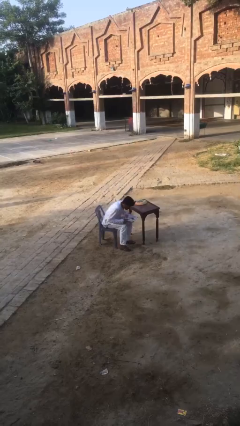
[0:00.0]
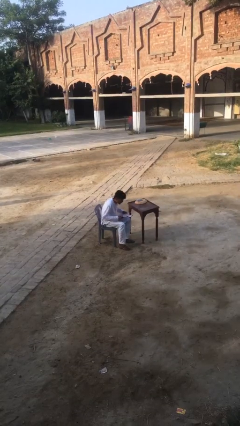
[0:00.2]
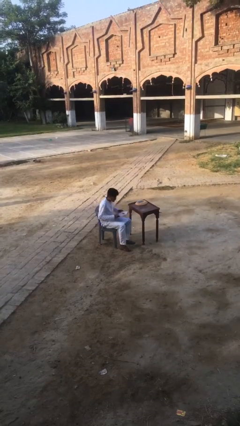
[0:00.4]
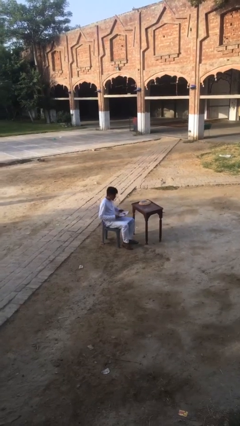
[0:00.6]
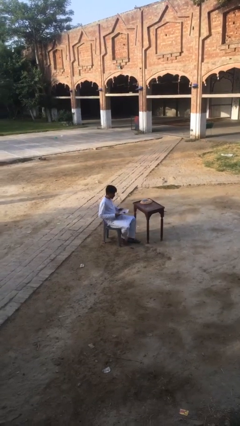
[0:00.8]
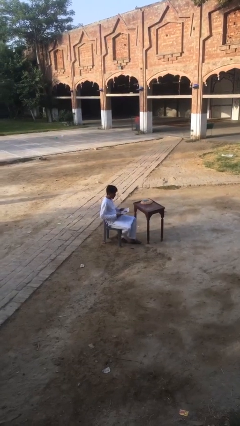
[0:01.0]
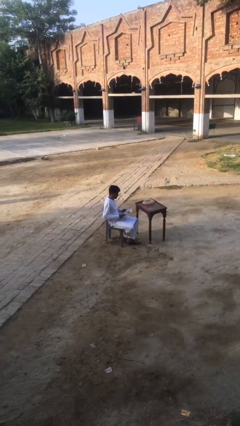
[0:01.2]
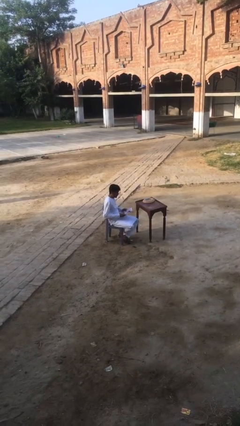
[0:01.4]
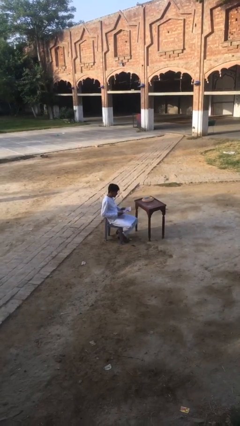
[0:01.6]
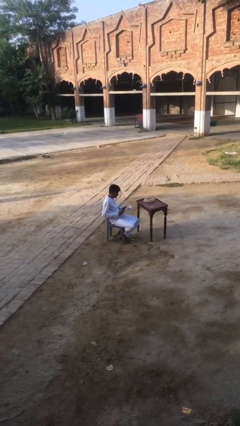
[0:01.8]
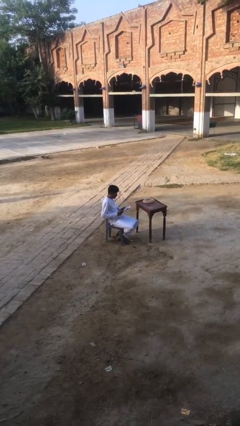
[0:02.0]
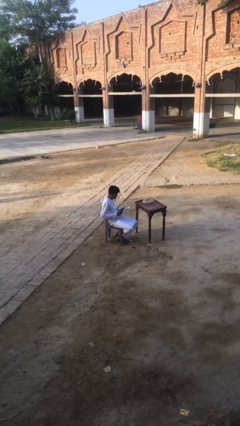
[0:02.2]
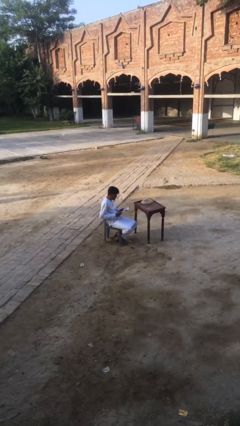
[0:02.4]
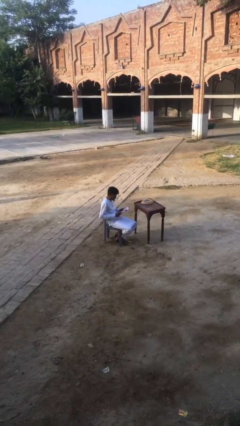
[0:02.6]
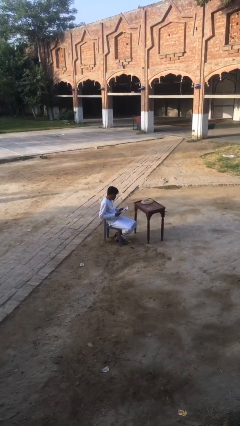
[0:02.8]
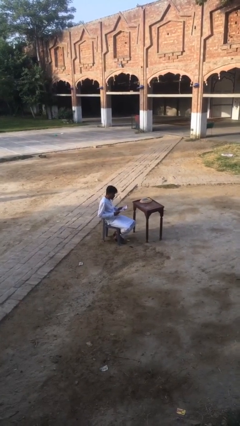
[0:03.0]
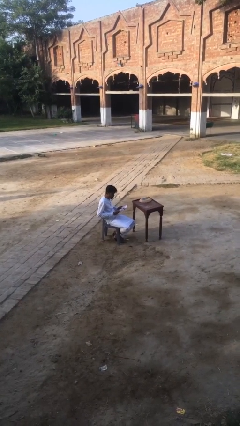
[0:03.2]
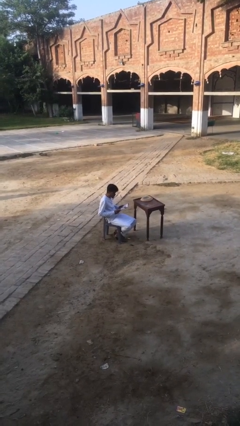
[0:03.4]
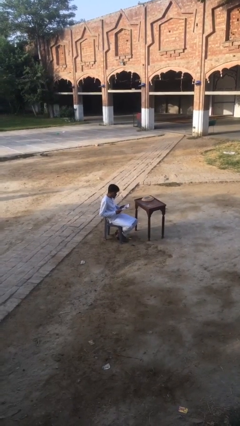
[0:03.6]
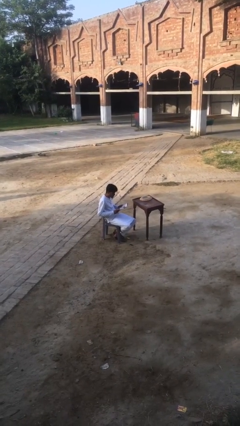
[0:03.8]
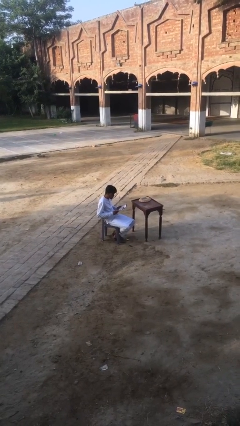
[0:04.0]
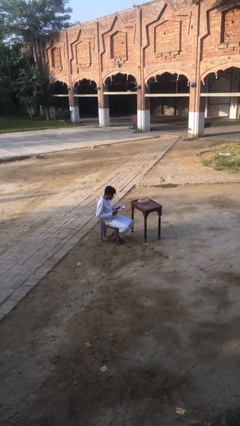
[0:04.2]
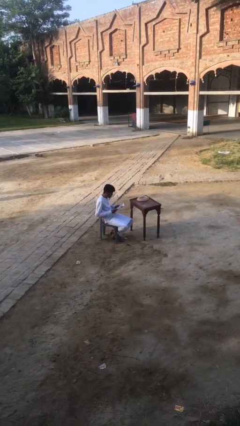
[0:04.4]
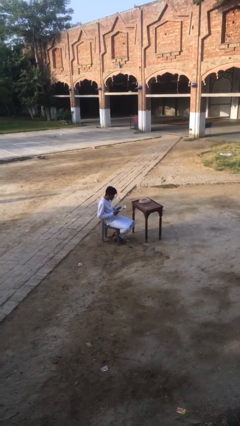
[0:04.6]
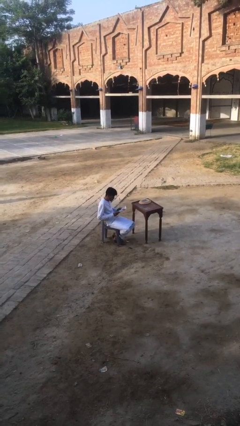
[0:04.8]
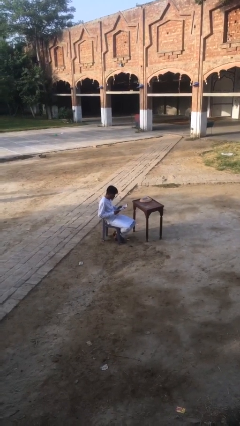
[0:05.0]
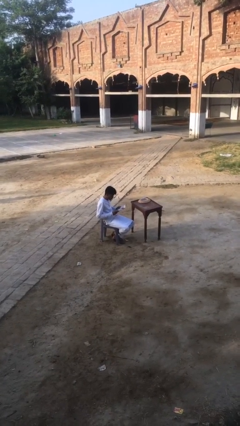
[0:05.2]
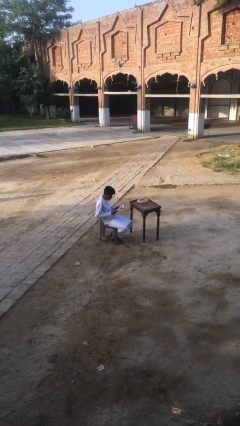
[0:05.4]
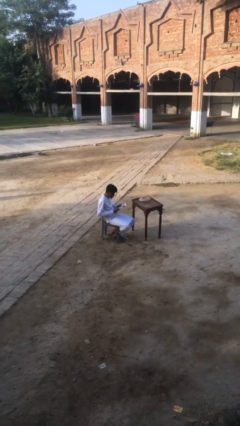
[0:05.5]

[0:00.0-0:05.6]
person reads document

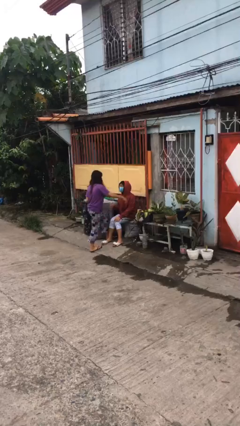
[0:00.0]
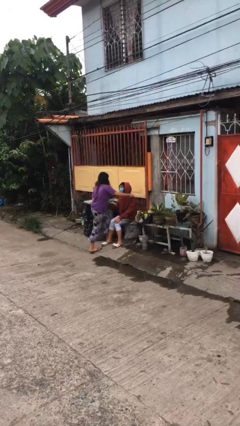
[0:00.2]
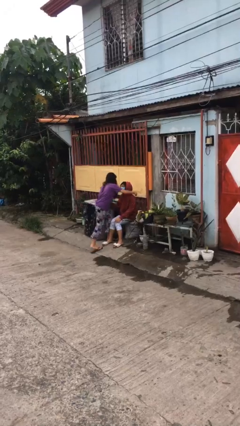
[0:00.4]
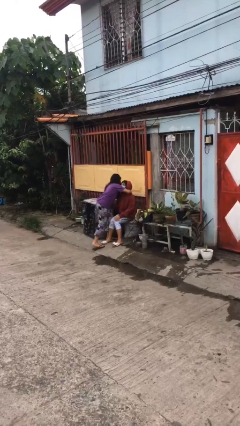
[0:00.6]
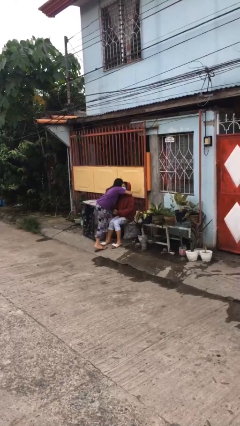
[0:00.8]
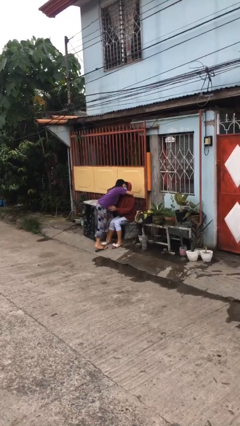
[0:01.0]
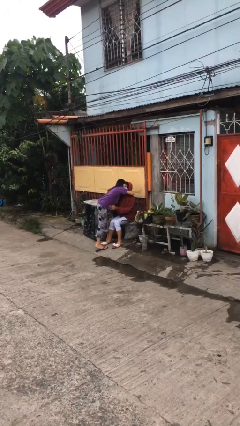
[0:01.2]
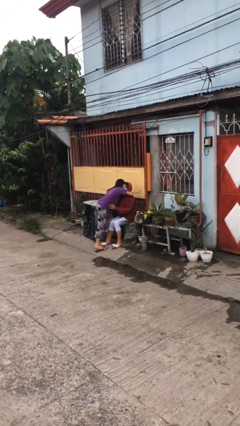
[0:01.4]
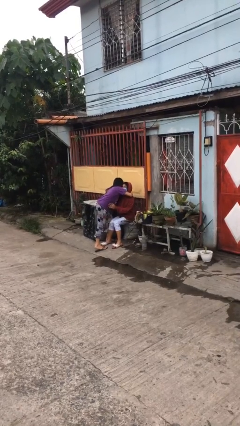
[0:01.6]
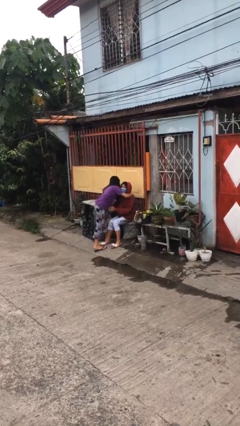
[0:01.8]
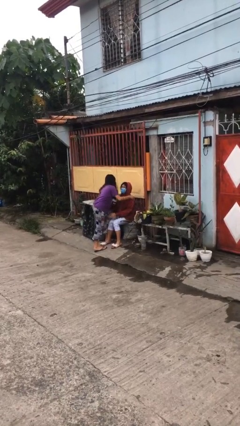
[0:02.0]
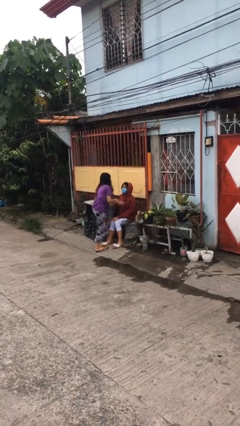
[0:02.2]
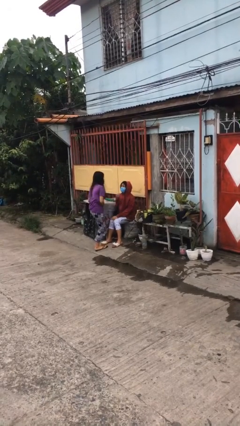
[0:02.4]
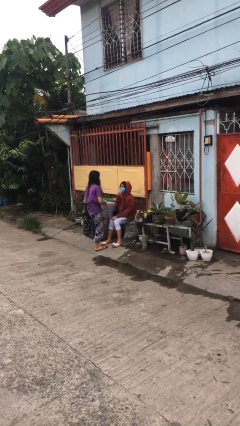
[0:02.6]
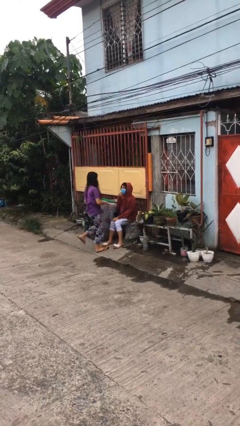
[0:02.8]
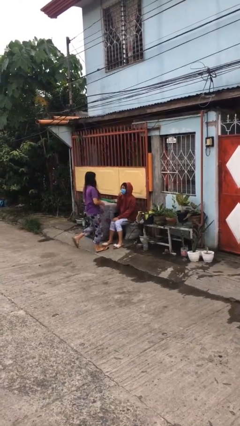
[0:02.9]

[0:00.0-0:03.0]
person embraces person

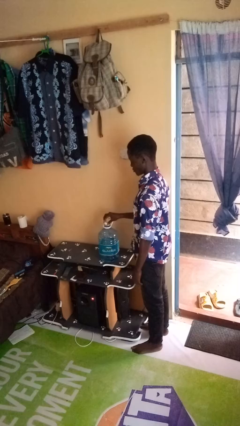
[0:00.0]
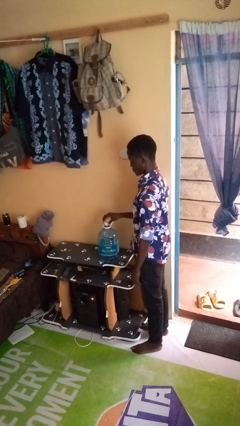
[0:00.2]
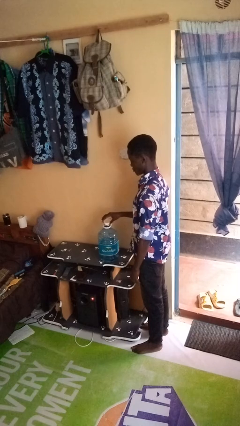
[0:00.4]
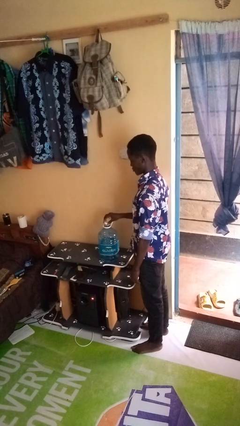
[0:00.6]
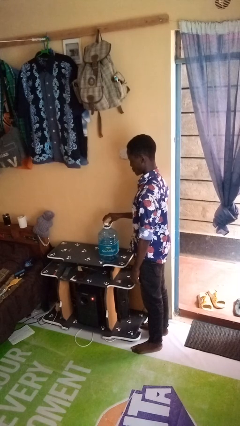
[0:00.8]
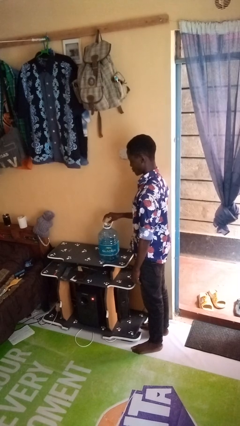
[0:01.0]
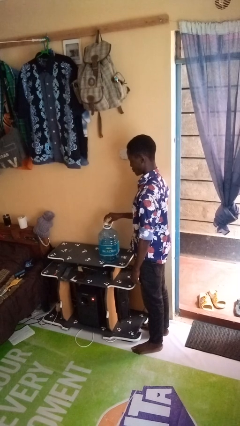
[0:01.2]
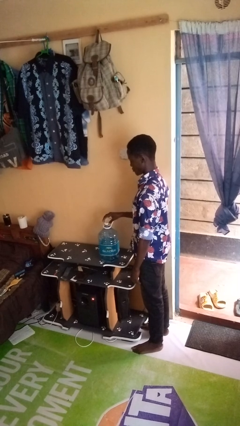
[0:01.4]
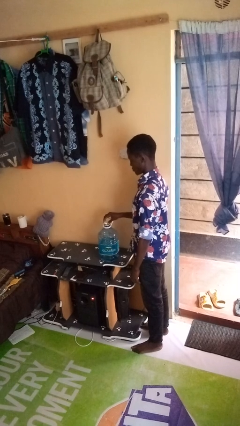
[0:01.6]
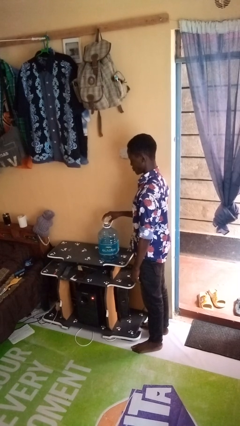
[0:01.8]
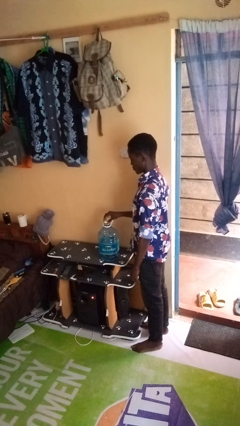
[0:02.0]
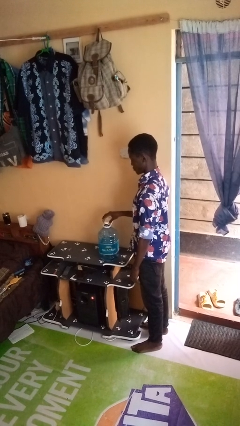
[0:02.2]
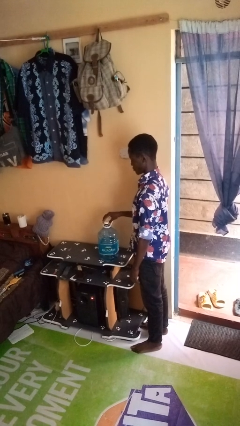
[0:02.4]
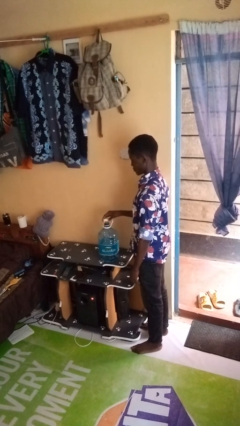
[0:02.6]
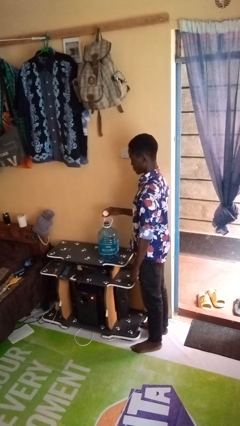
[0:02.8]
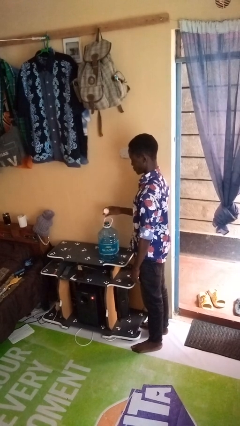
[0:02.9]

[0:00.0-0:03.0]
person unscrews lid from bottle

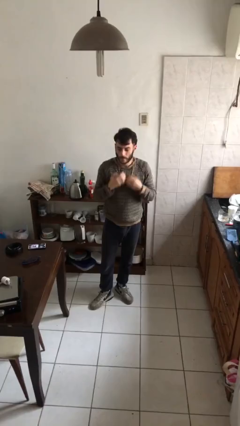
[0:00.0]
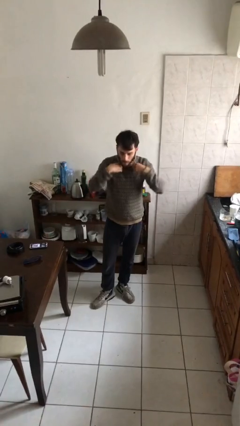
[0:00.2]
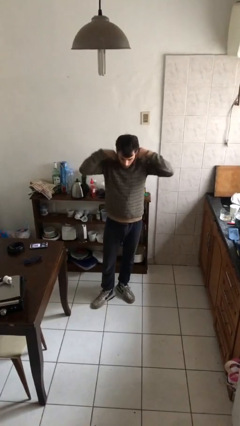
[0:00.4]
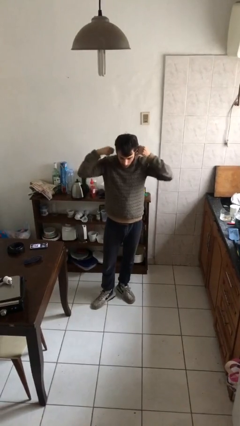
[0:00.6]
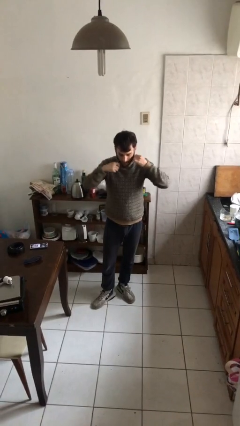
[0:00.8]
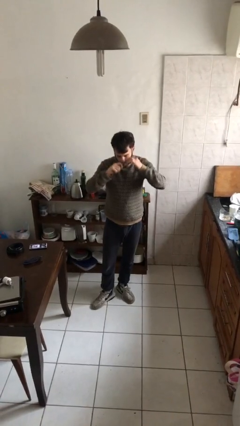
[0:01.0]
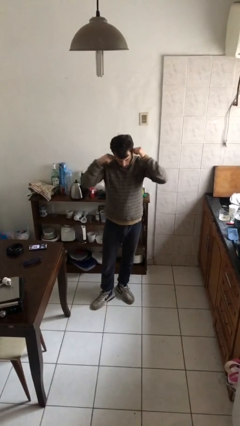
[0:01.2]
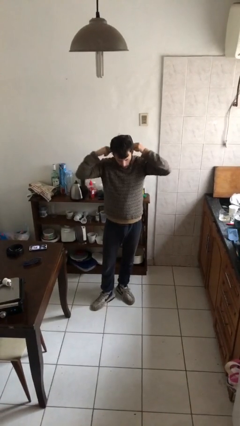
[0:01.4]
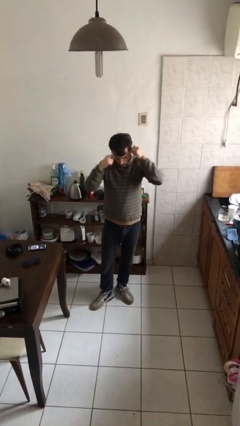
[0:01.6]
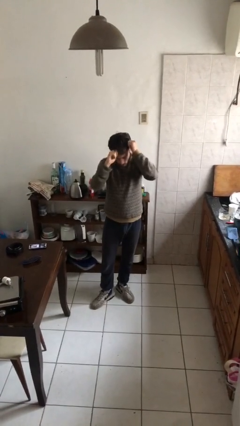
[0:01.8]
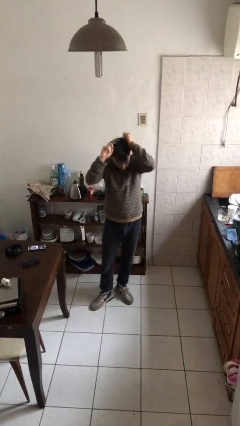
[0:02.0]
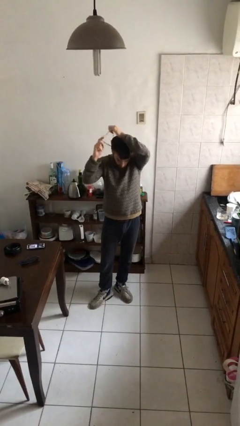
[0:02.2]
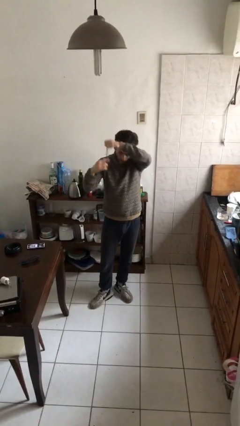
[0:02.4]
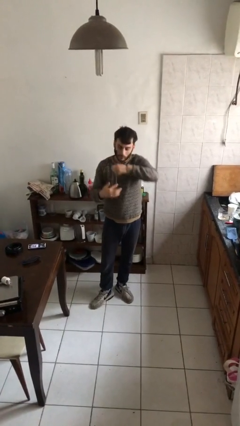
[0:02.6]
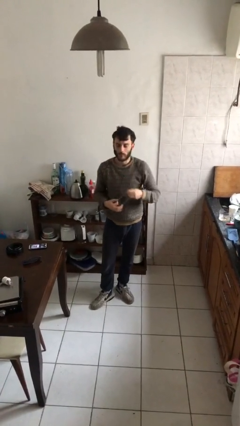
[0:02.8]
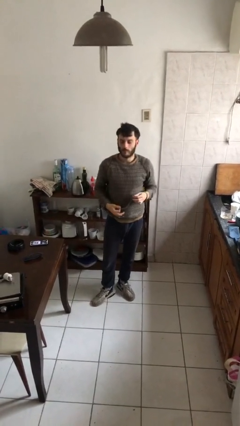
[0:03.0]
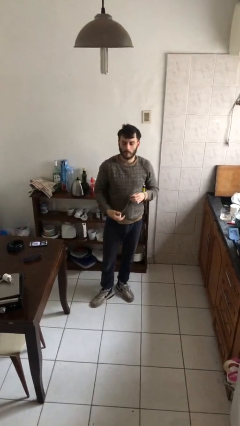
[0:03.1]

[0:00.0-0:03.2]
person takes off necklace

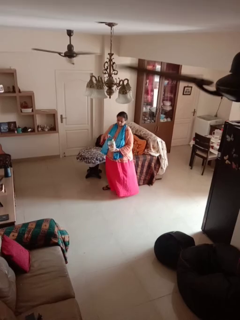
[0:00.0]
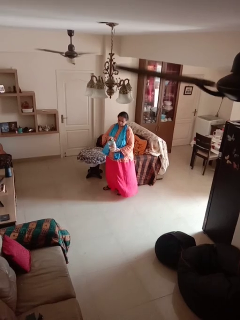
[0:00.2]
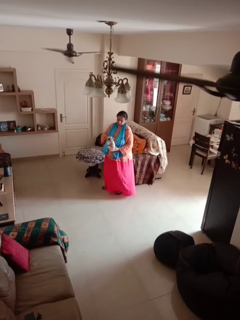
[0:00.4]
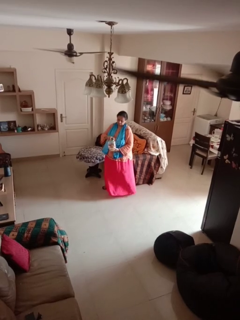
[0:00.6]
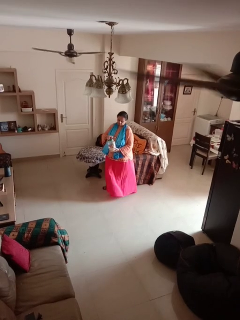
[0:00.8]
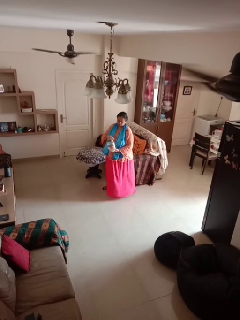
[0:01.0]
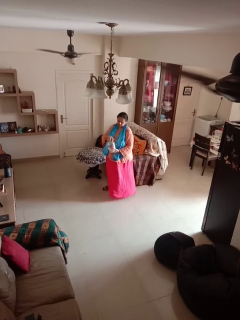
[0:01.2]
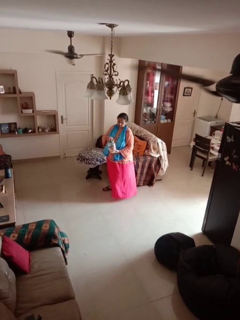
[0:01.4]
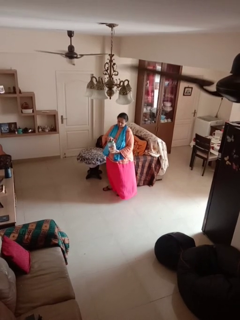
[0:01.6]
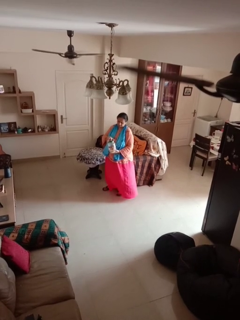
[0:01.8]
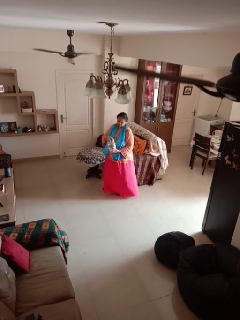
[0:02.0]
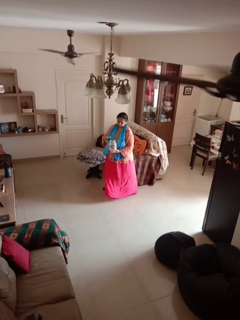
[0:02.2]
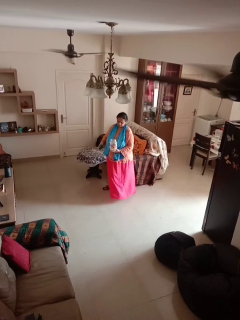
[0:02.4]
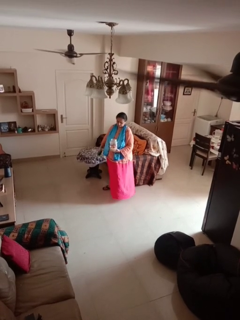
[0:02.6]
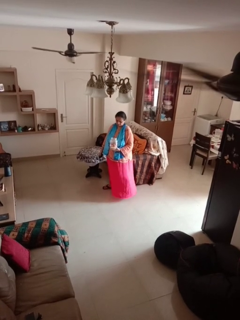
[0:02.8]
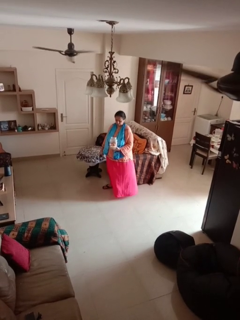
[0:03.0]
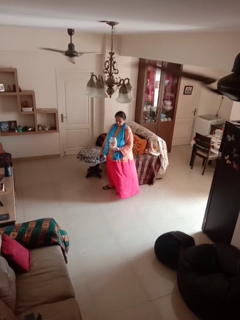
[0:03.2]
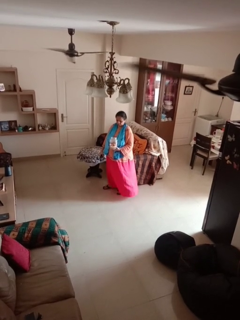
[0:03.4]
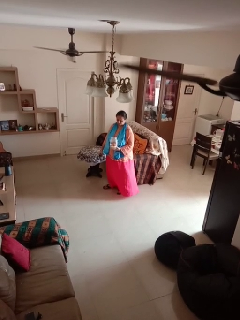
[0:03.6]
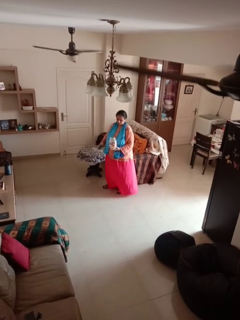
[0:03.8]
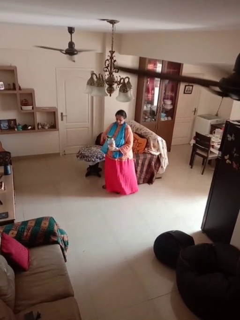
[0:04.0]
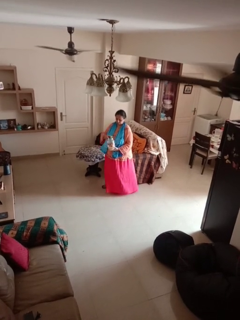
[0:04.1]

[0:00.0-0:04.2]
person opens jar
